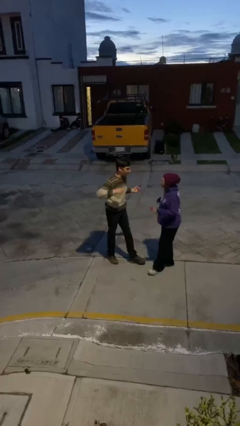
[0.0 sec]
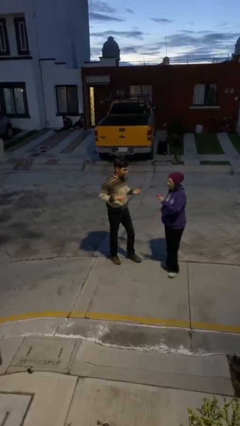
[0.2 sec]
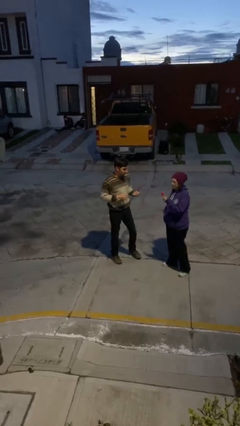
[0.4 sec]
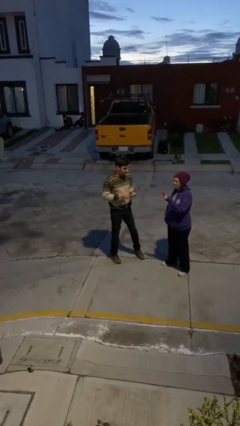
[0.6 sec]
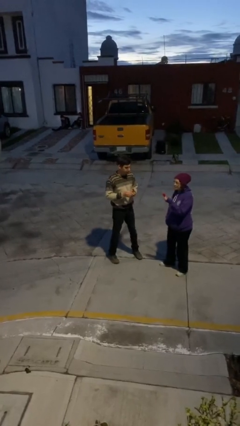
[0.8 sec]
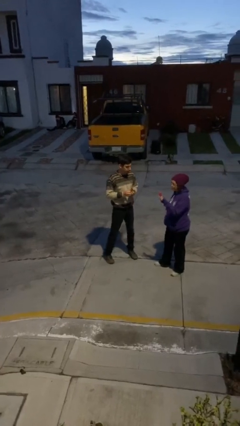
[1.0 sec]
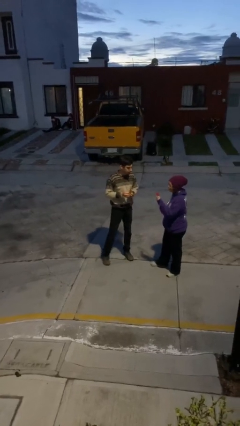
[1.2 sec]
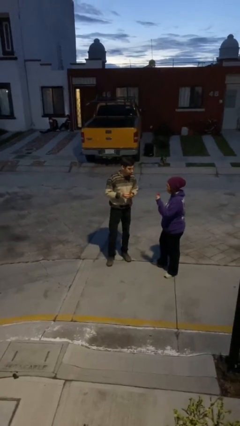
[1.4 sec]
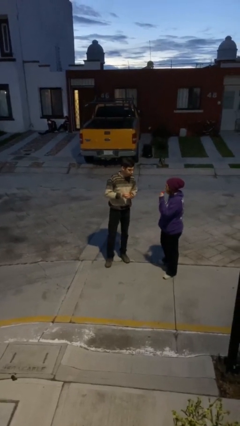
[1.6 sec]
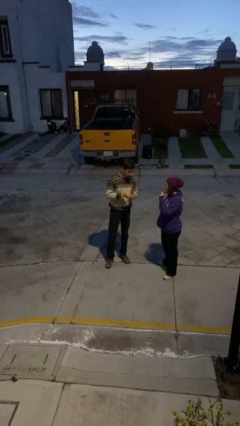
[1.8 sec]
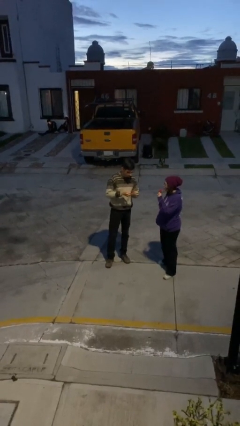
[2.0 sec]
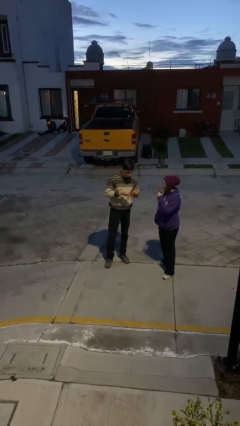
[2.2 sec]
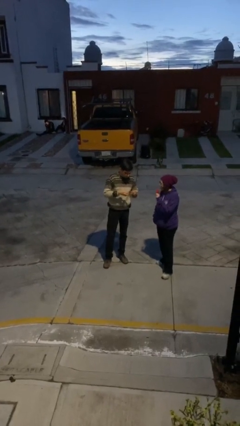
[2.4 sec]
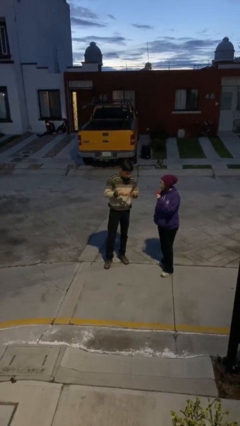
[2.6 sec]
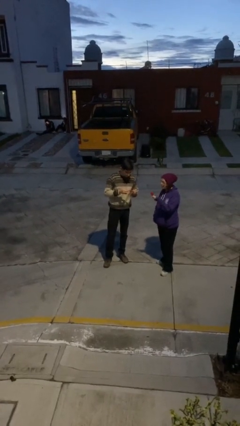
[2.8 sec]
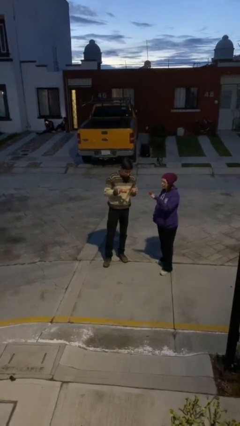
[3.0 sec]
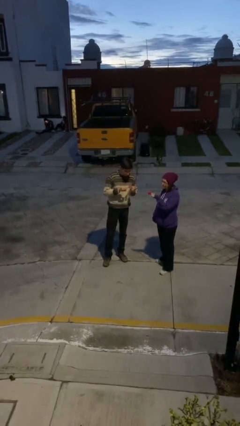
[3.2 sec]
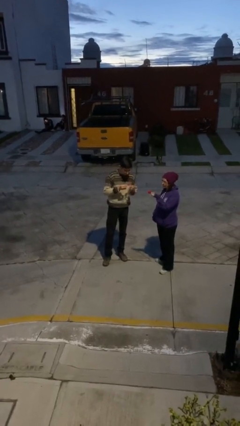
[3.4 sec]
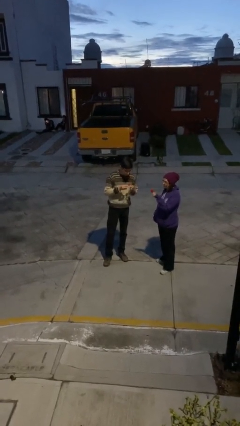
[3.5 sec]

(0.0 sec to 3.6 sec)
person talks to person

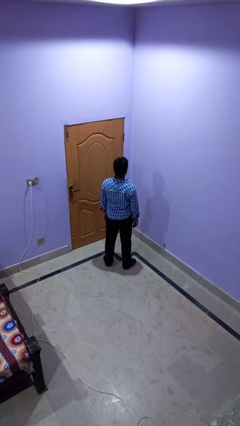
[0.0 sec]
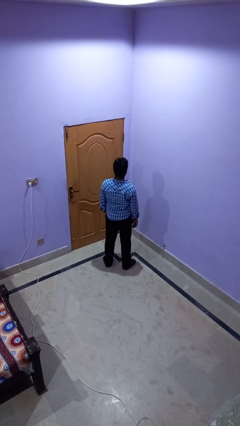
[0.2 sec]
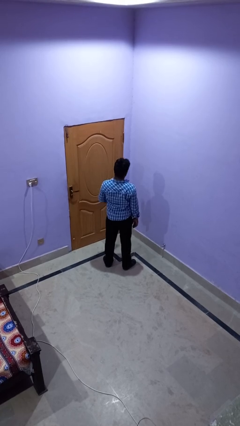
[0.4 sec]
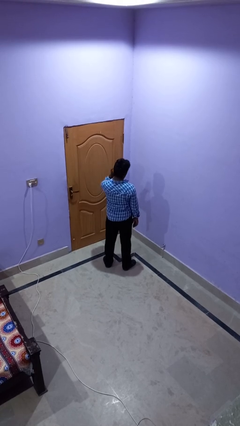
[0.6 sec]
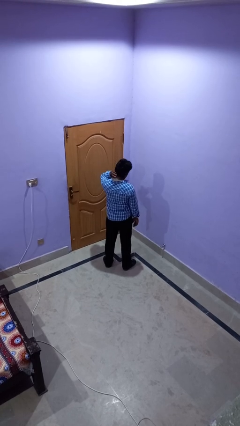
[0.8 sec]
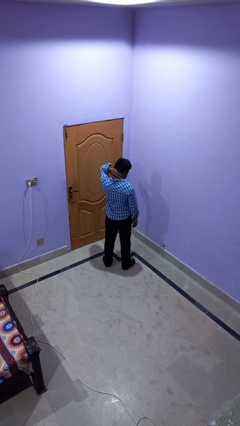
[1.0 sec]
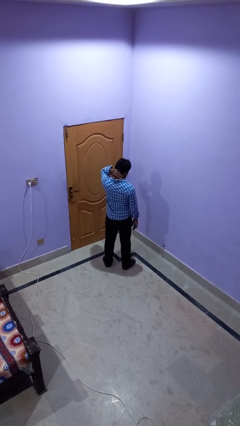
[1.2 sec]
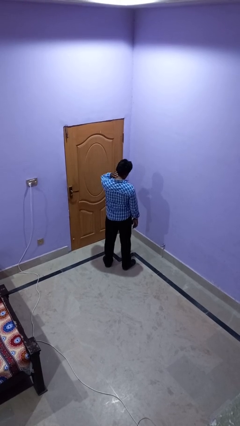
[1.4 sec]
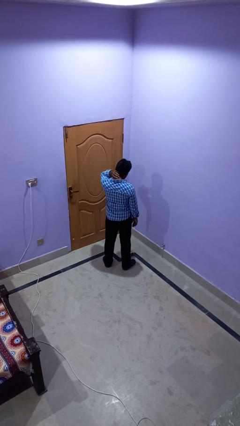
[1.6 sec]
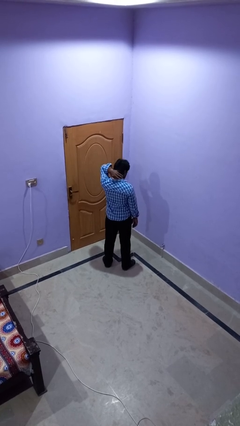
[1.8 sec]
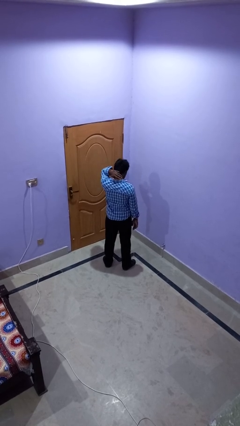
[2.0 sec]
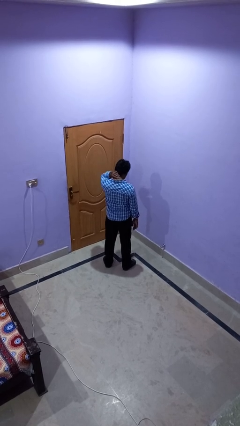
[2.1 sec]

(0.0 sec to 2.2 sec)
person rubs neck

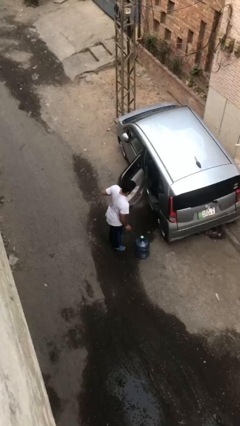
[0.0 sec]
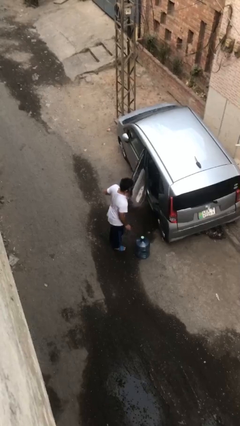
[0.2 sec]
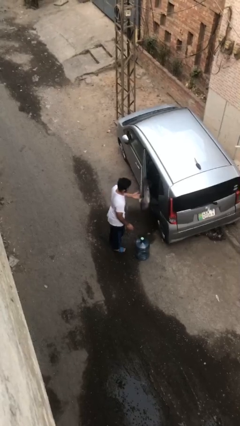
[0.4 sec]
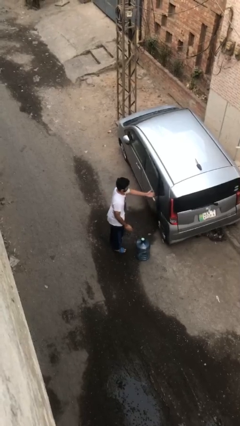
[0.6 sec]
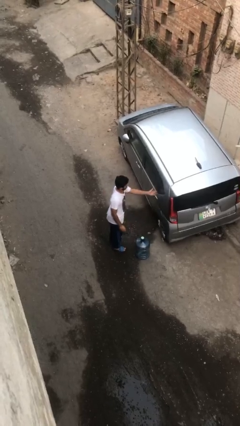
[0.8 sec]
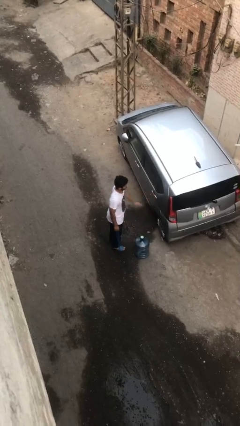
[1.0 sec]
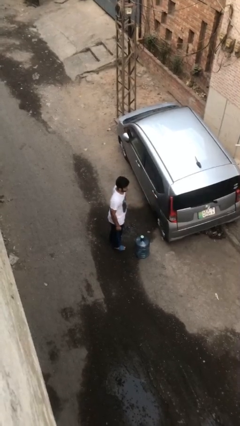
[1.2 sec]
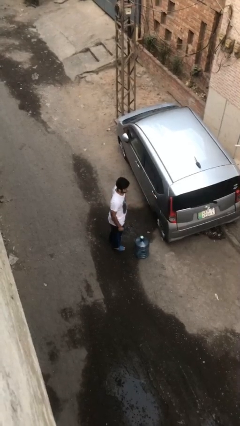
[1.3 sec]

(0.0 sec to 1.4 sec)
person closes car door

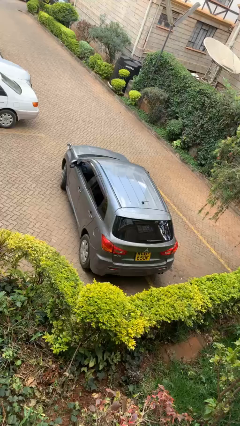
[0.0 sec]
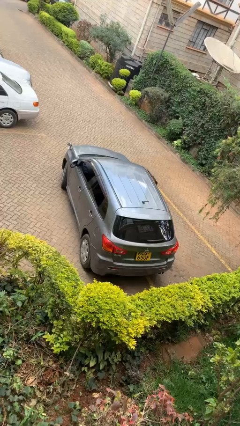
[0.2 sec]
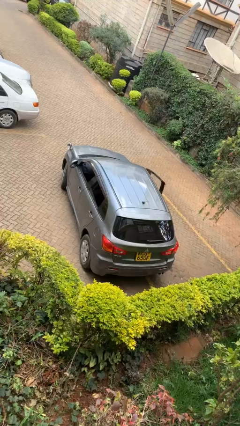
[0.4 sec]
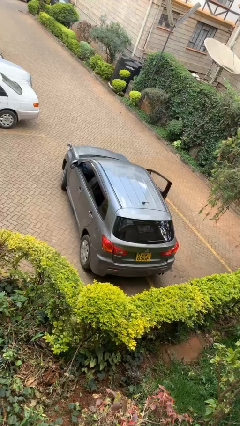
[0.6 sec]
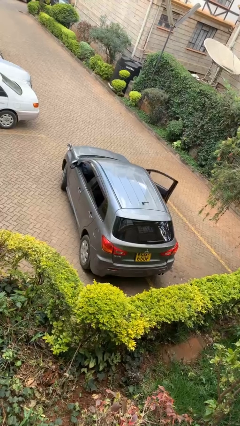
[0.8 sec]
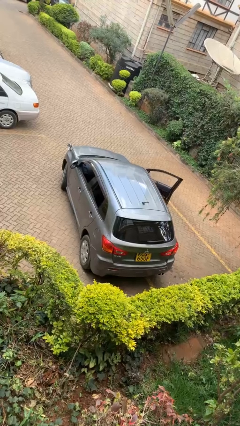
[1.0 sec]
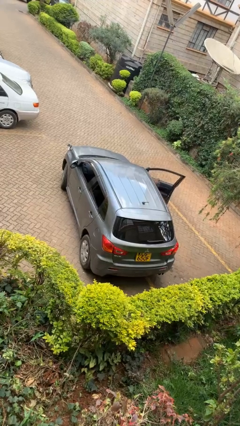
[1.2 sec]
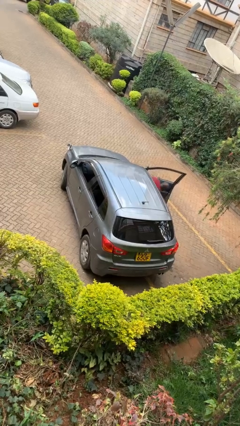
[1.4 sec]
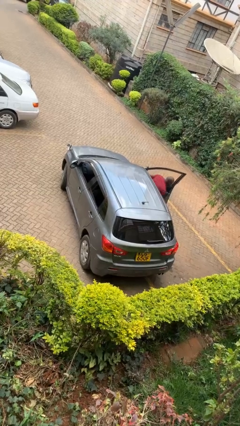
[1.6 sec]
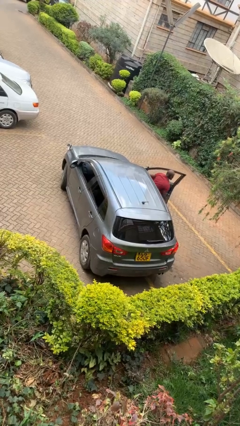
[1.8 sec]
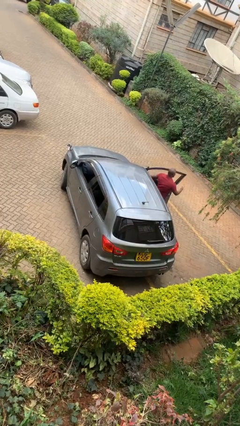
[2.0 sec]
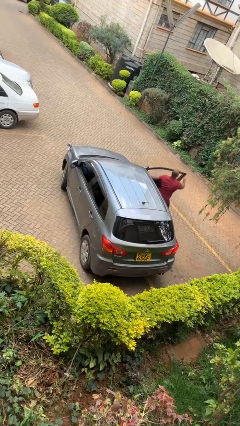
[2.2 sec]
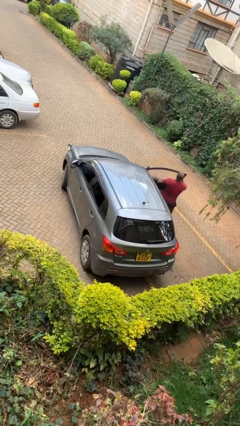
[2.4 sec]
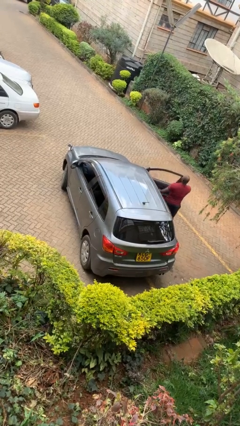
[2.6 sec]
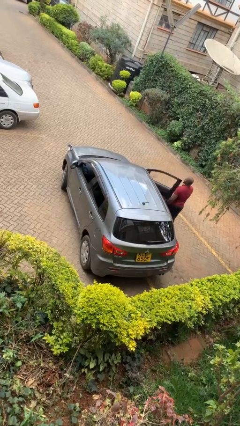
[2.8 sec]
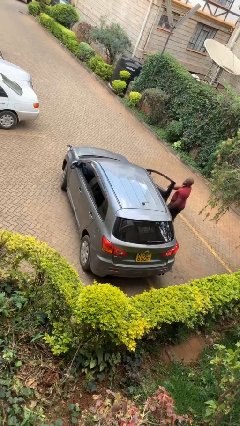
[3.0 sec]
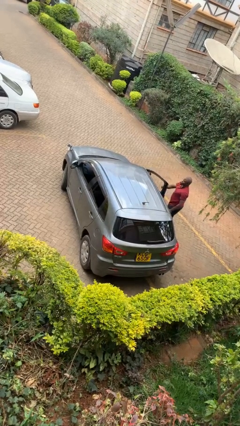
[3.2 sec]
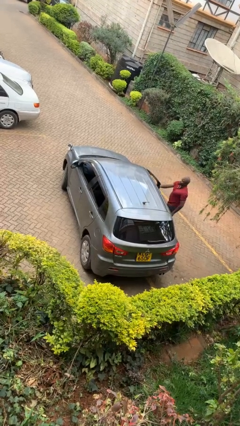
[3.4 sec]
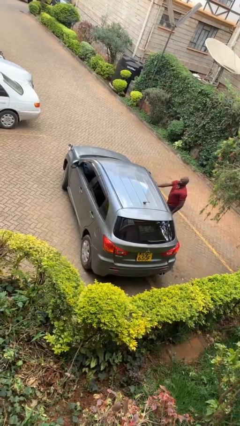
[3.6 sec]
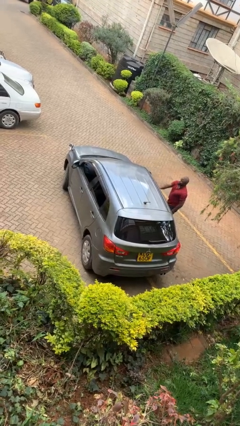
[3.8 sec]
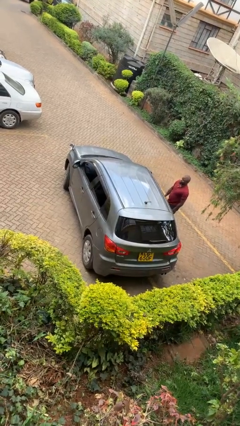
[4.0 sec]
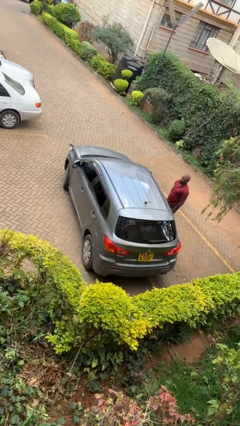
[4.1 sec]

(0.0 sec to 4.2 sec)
car drops off person

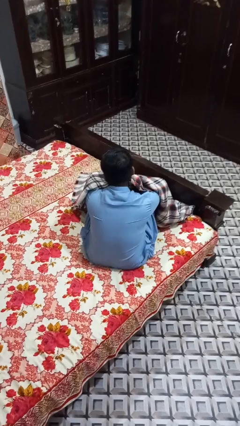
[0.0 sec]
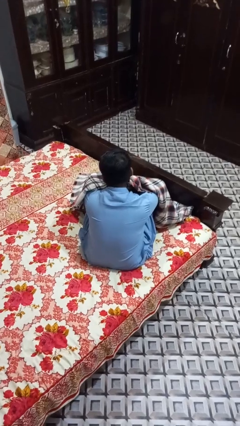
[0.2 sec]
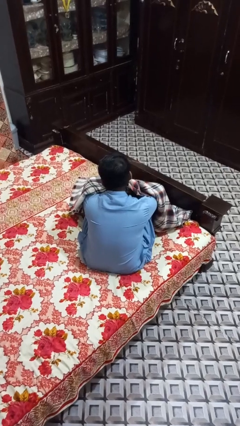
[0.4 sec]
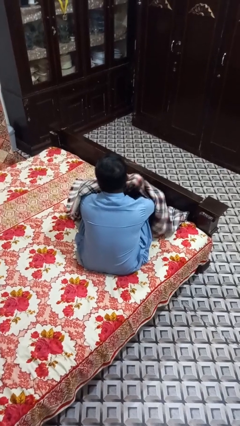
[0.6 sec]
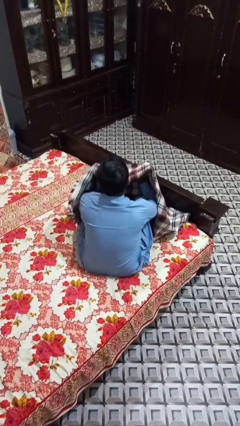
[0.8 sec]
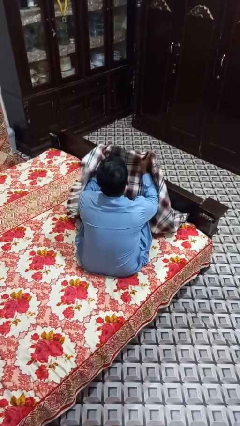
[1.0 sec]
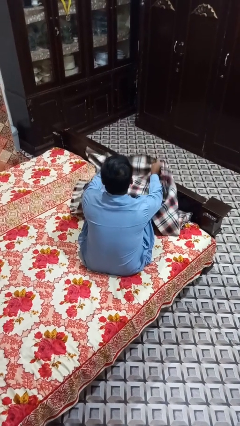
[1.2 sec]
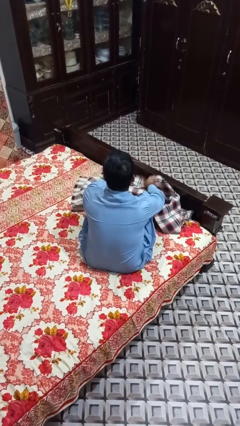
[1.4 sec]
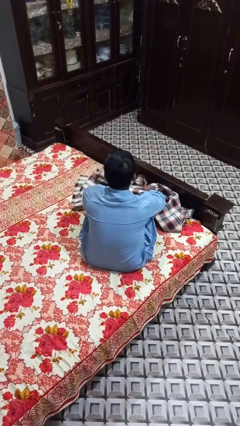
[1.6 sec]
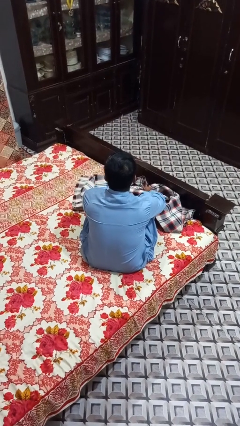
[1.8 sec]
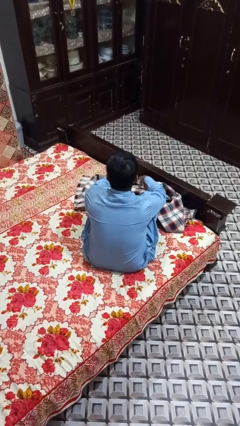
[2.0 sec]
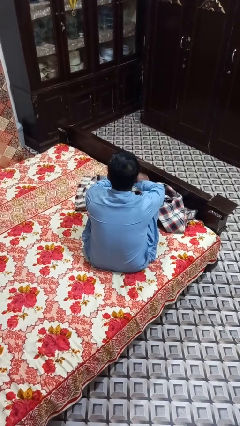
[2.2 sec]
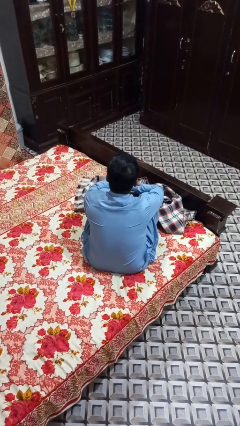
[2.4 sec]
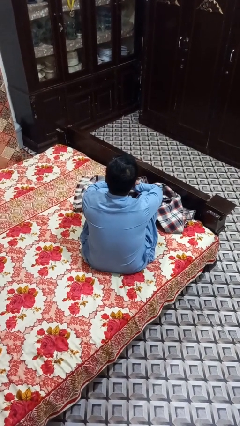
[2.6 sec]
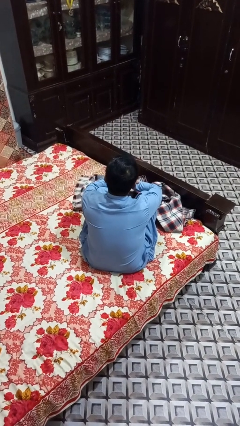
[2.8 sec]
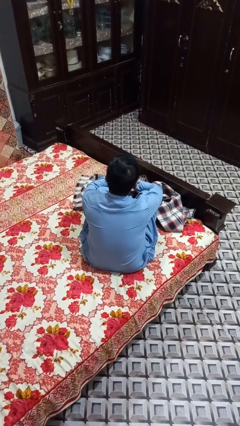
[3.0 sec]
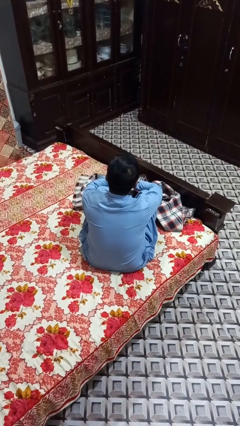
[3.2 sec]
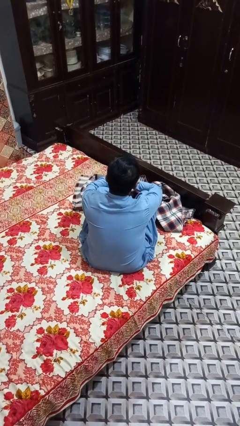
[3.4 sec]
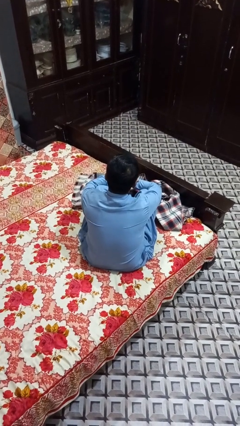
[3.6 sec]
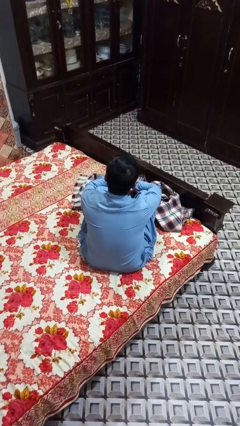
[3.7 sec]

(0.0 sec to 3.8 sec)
person uncovers with blanket

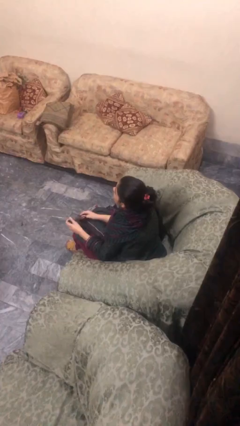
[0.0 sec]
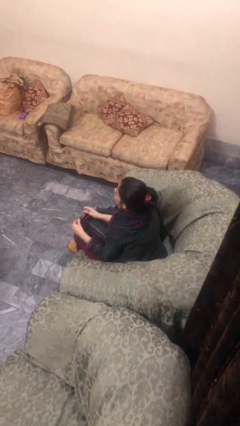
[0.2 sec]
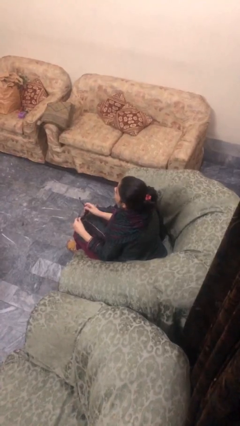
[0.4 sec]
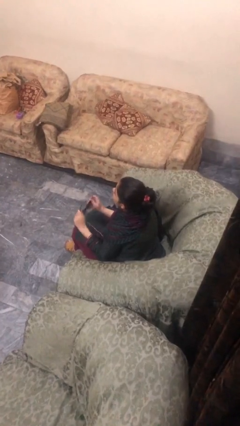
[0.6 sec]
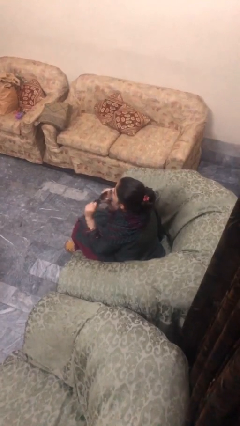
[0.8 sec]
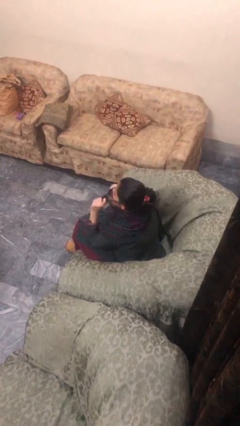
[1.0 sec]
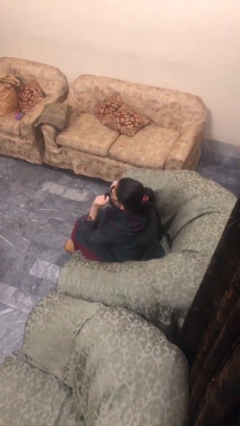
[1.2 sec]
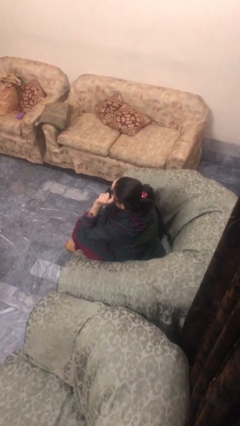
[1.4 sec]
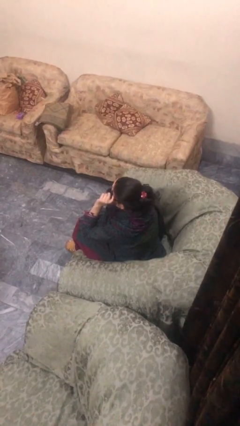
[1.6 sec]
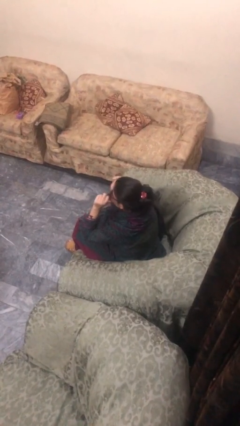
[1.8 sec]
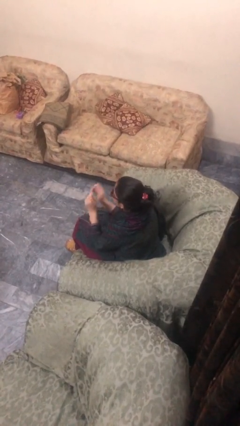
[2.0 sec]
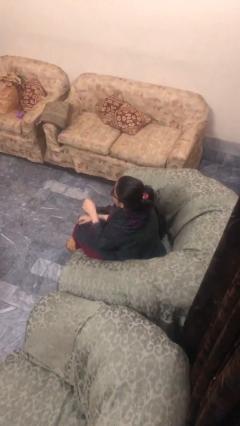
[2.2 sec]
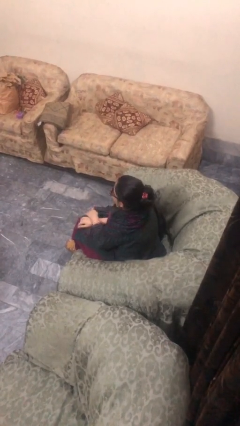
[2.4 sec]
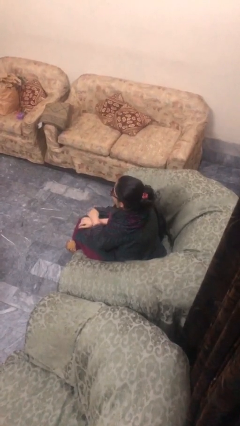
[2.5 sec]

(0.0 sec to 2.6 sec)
person puts on sunglasses
